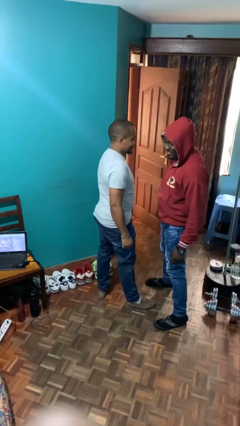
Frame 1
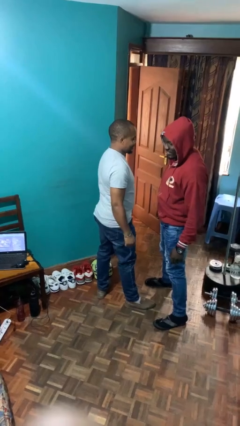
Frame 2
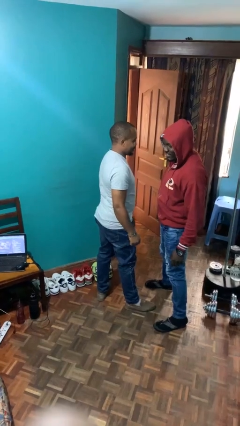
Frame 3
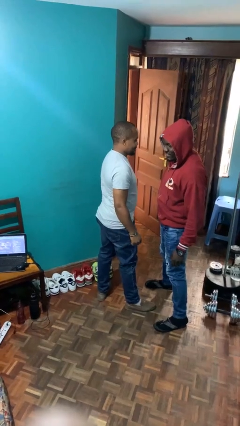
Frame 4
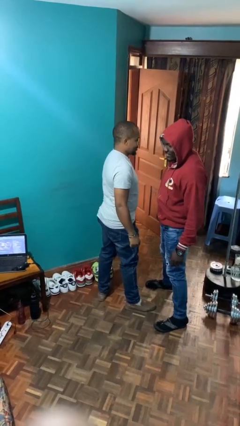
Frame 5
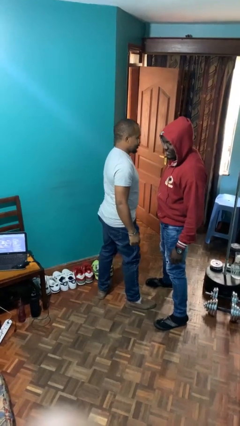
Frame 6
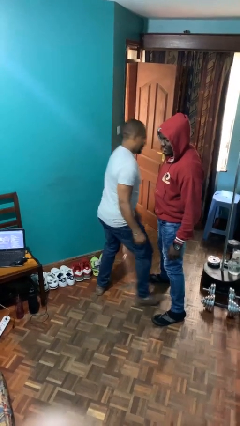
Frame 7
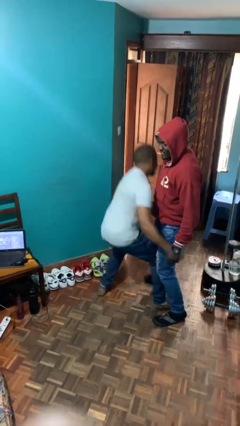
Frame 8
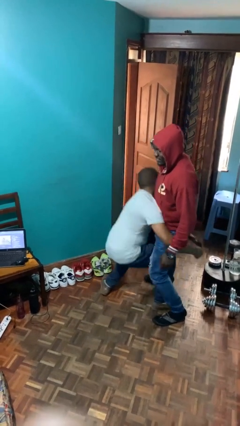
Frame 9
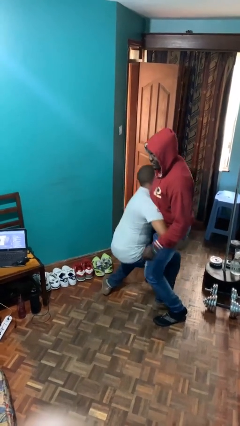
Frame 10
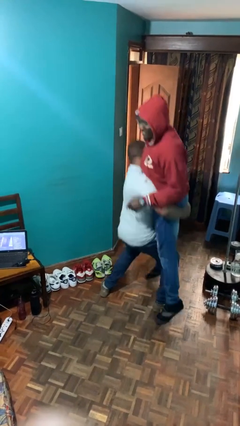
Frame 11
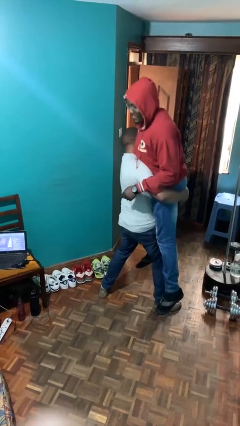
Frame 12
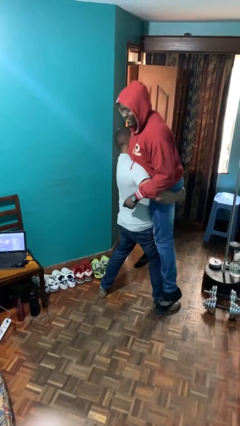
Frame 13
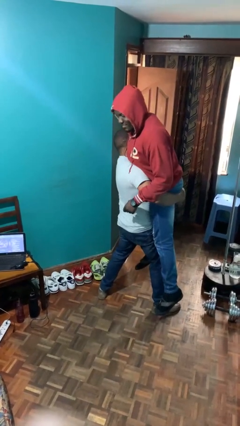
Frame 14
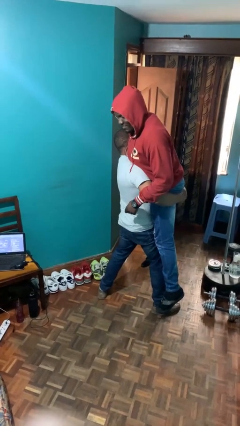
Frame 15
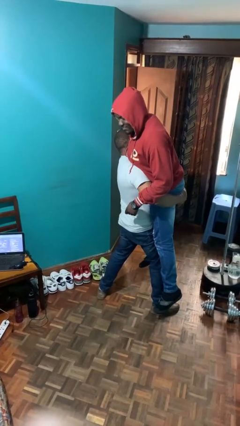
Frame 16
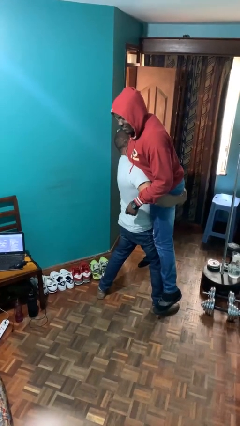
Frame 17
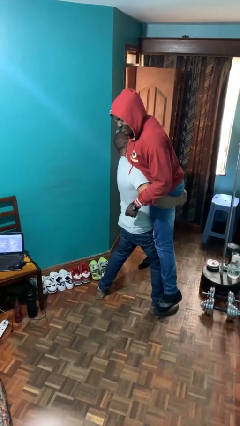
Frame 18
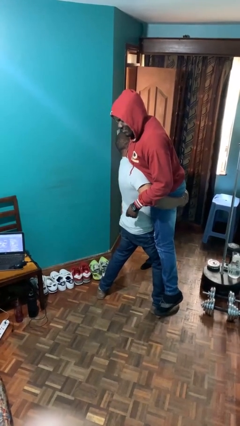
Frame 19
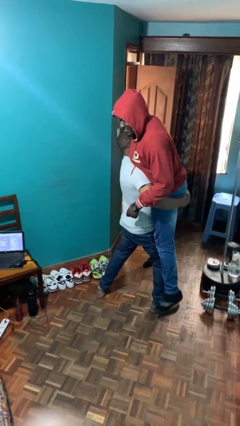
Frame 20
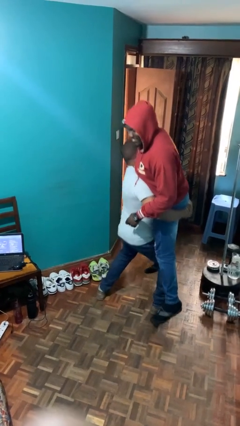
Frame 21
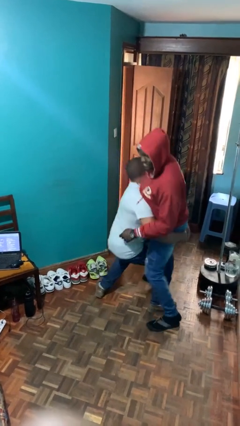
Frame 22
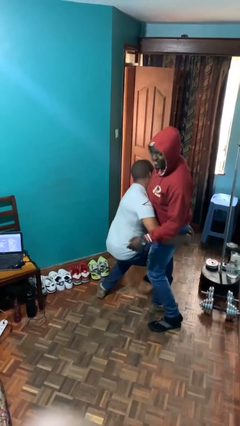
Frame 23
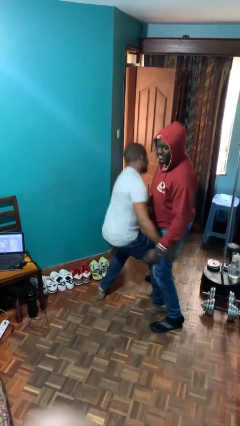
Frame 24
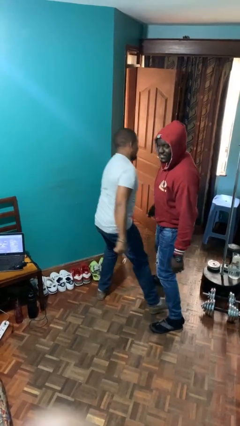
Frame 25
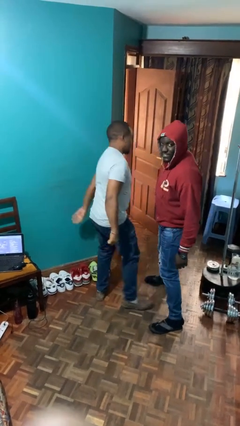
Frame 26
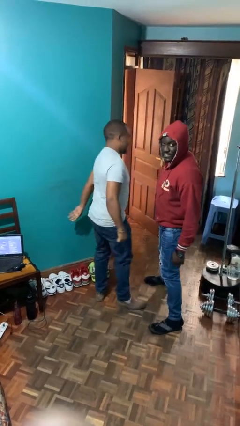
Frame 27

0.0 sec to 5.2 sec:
person picks up person

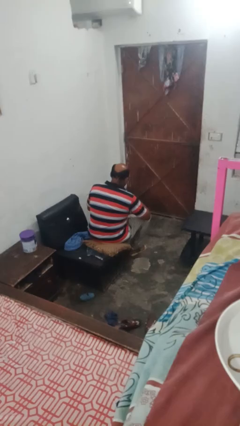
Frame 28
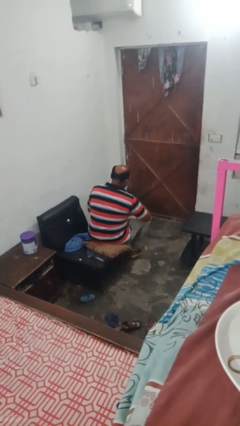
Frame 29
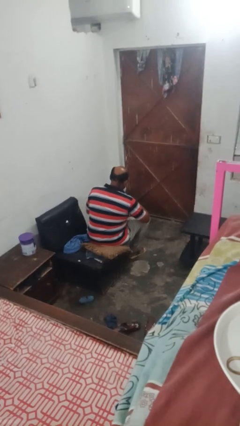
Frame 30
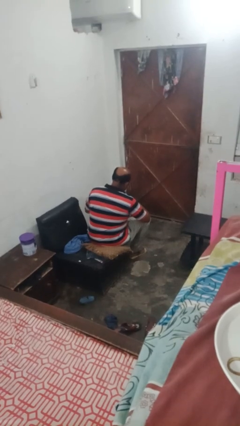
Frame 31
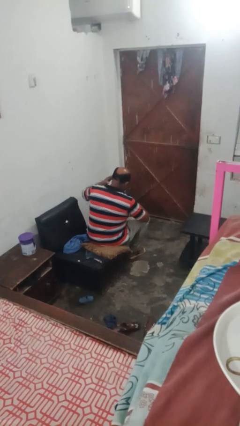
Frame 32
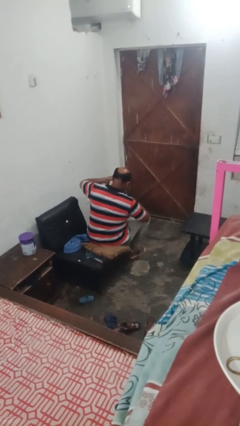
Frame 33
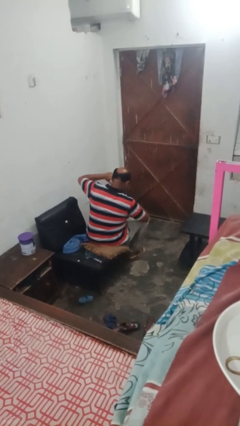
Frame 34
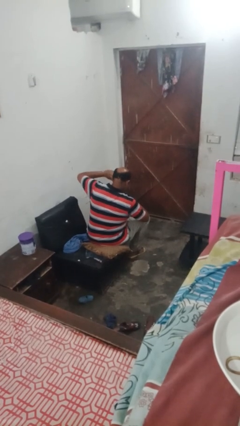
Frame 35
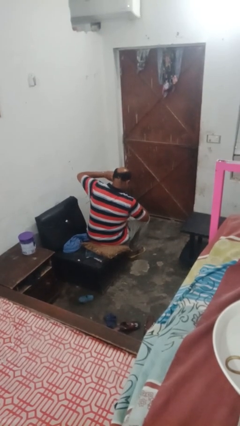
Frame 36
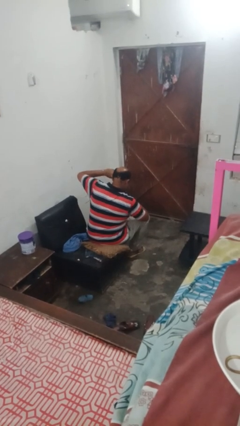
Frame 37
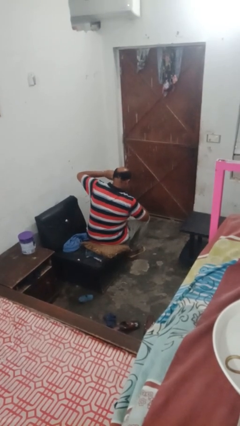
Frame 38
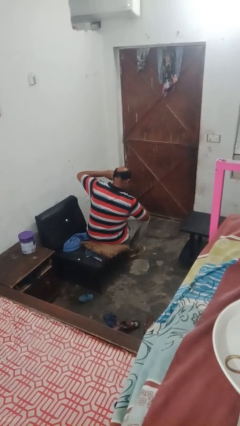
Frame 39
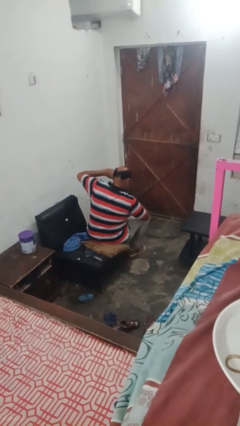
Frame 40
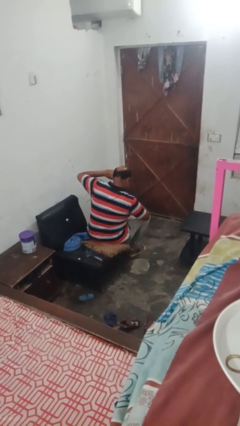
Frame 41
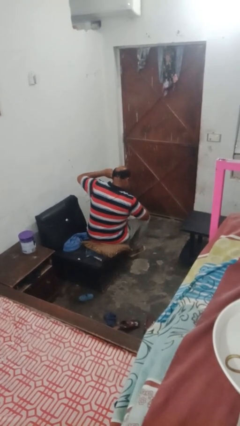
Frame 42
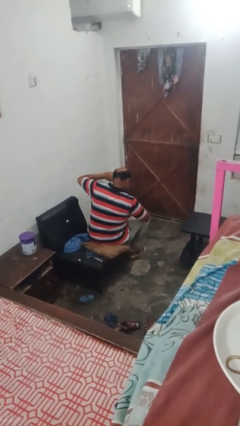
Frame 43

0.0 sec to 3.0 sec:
person puts fingers in ear

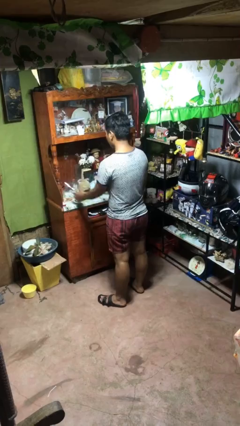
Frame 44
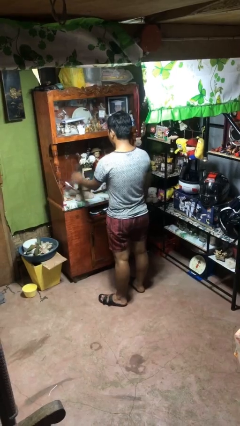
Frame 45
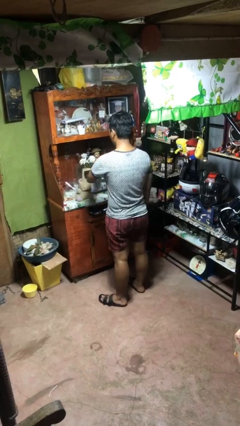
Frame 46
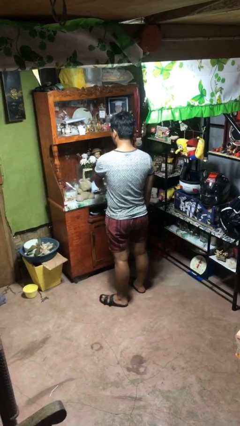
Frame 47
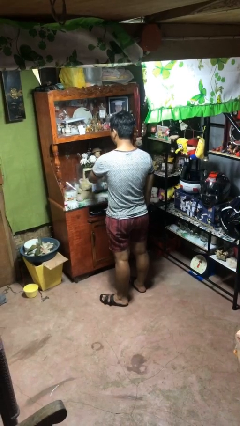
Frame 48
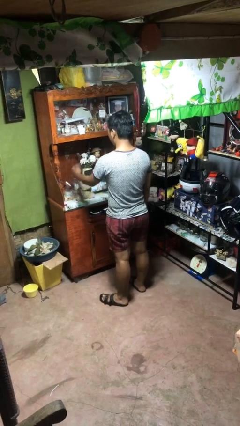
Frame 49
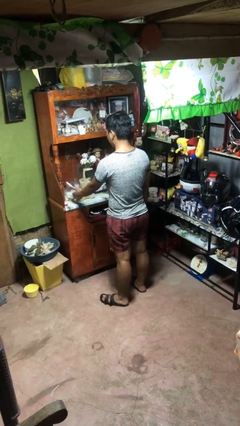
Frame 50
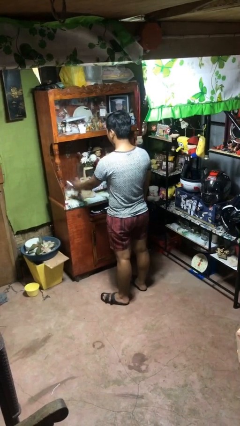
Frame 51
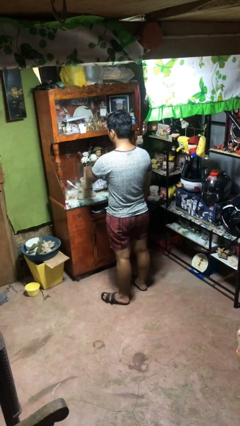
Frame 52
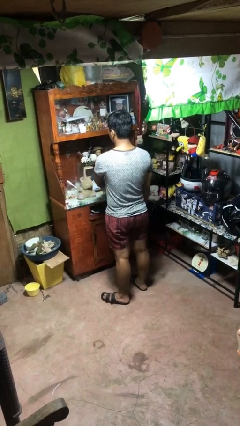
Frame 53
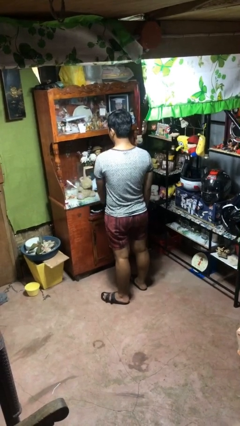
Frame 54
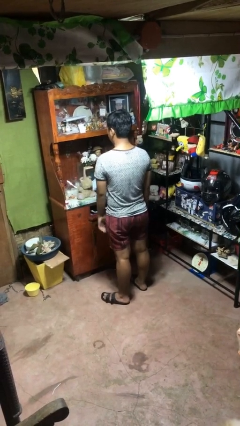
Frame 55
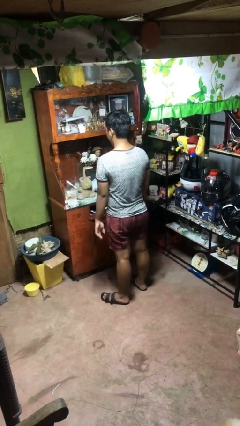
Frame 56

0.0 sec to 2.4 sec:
person waves hand over object

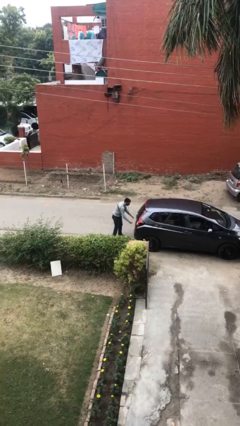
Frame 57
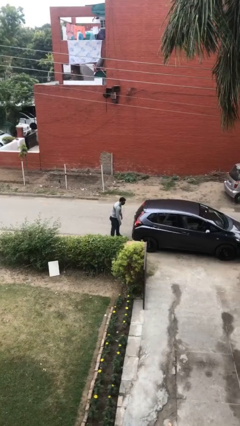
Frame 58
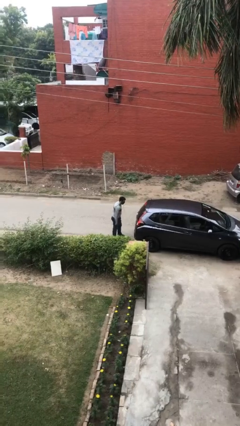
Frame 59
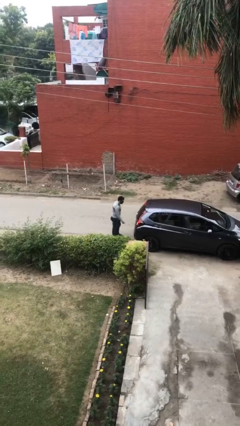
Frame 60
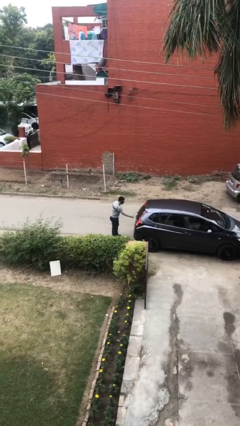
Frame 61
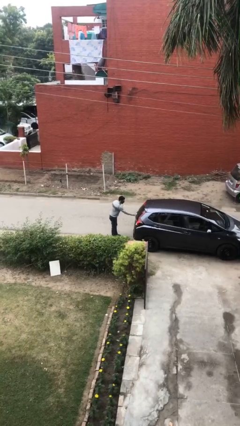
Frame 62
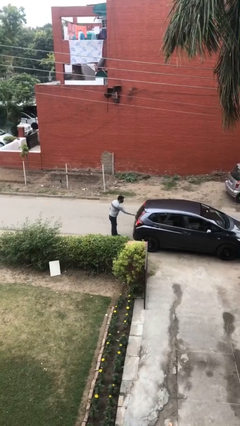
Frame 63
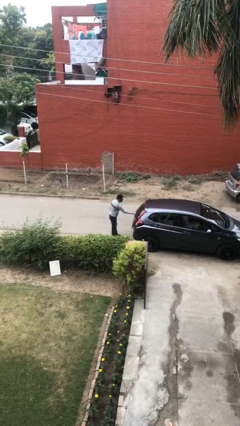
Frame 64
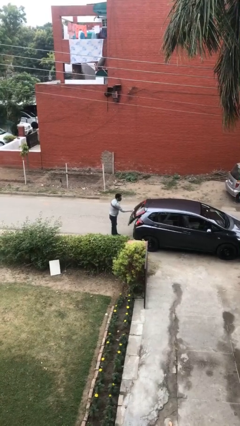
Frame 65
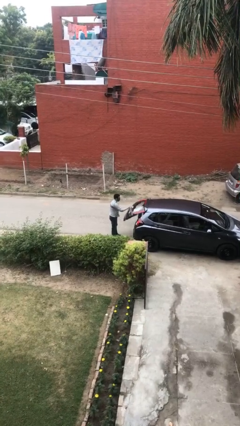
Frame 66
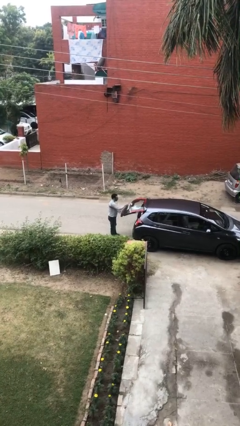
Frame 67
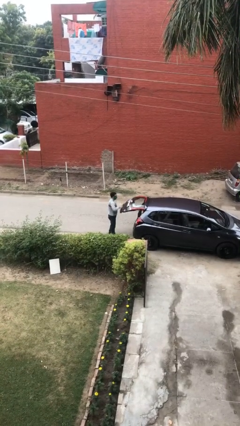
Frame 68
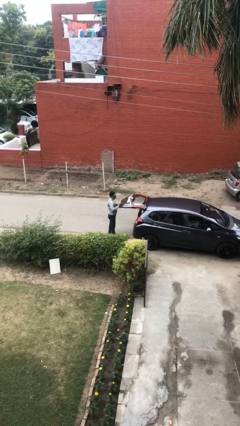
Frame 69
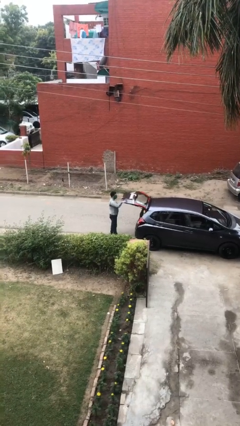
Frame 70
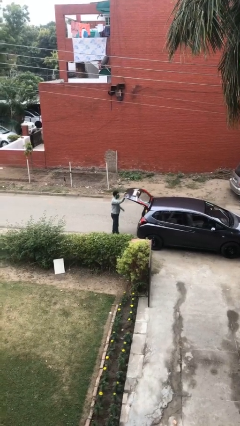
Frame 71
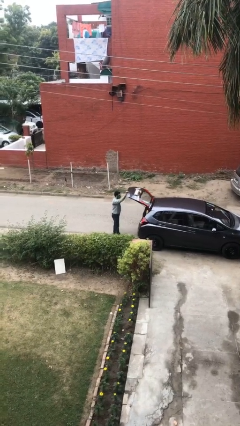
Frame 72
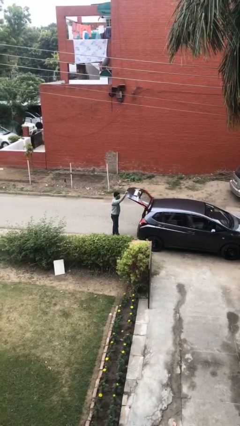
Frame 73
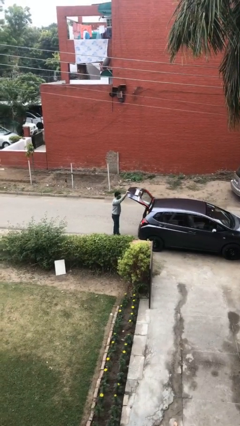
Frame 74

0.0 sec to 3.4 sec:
person opens car trunk

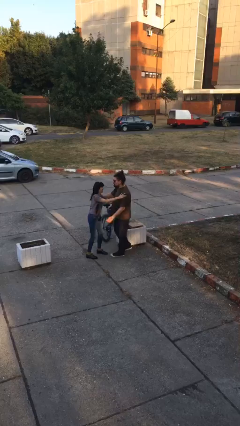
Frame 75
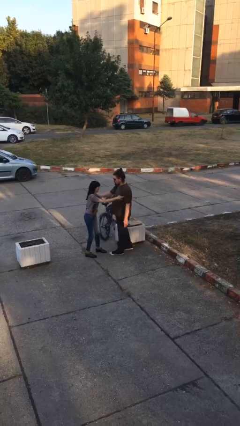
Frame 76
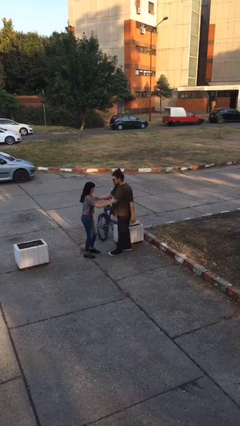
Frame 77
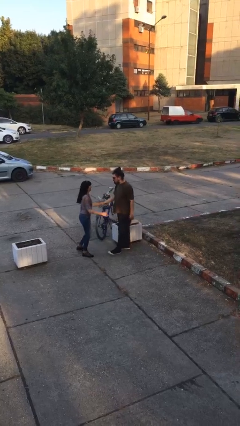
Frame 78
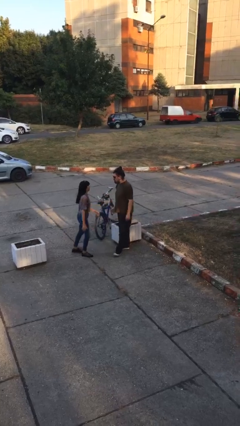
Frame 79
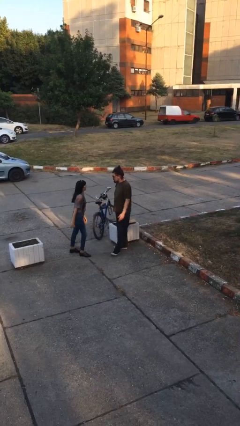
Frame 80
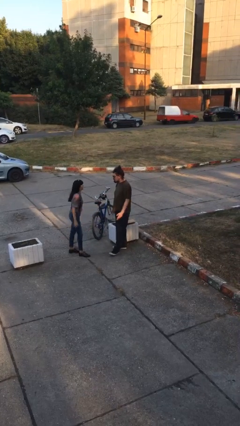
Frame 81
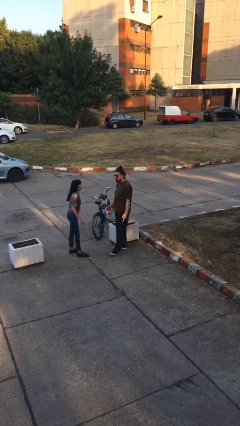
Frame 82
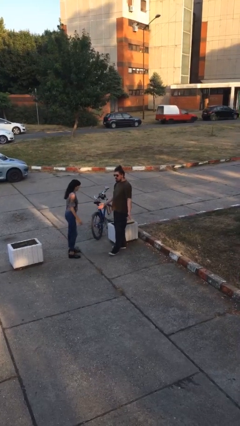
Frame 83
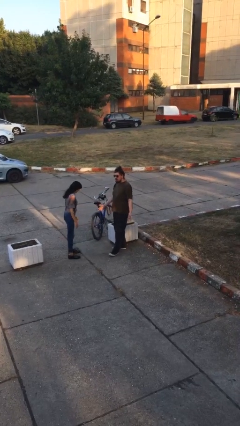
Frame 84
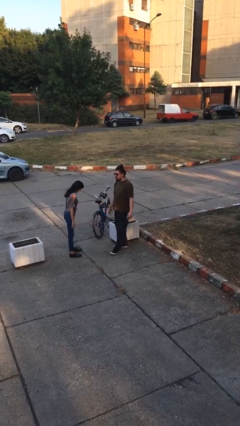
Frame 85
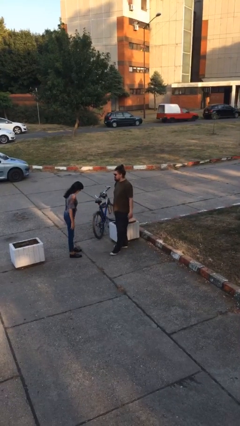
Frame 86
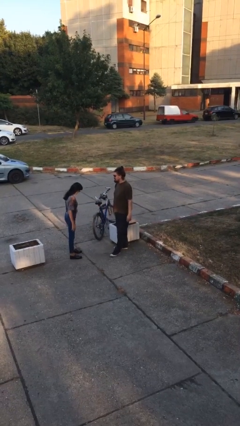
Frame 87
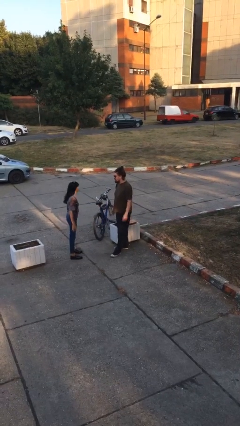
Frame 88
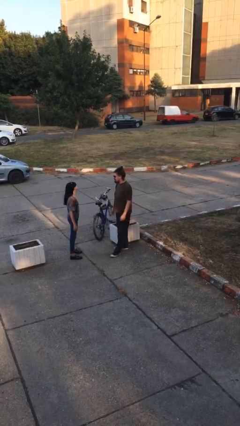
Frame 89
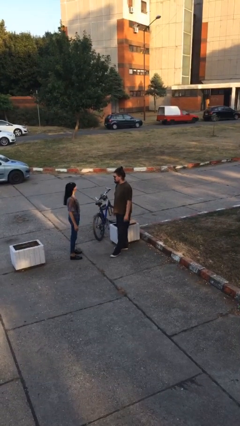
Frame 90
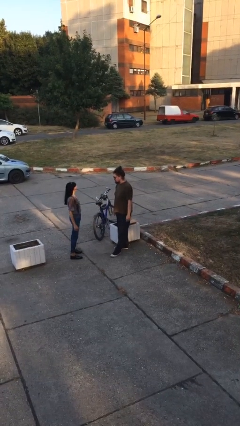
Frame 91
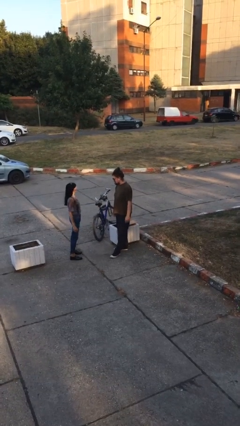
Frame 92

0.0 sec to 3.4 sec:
person talks to person
